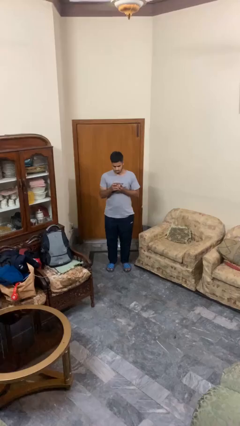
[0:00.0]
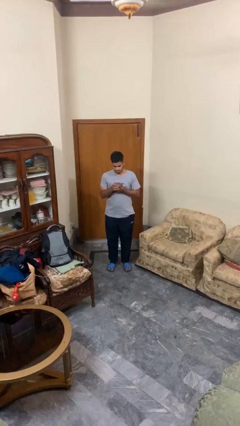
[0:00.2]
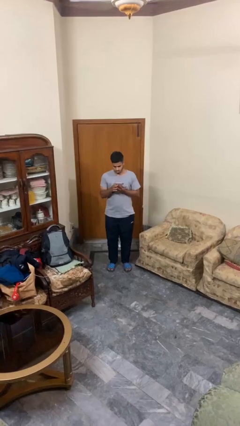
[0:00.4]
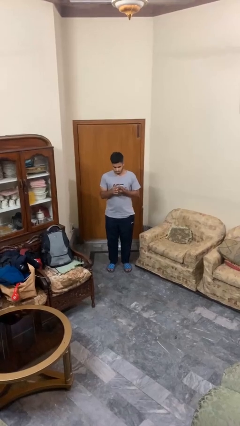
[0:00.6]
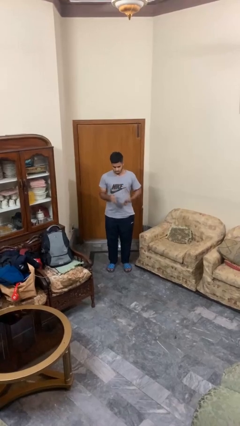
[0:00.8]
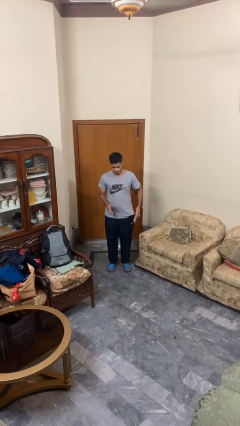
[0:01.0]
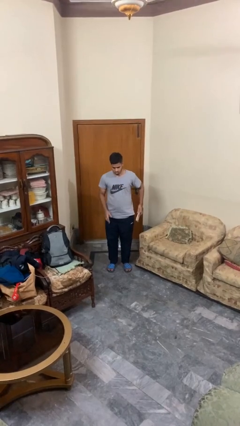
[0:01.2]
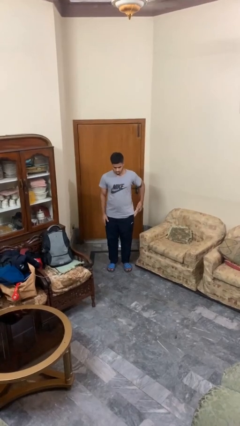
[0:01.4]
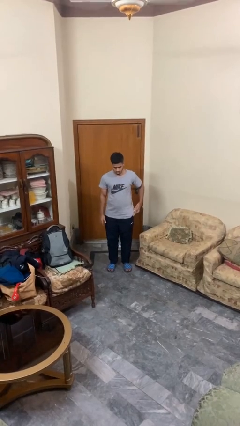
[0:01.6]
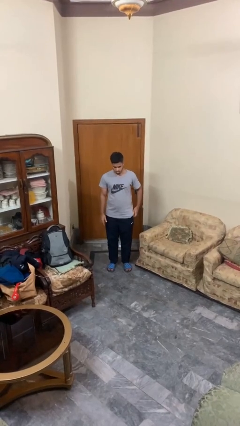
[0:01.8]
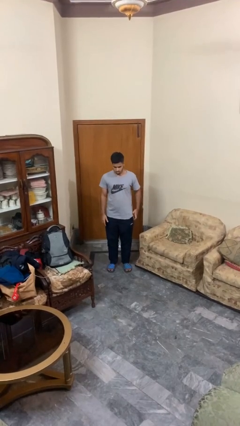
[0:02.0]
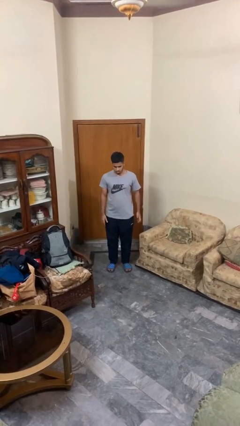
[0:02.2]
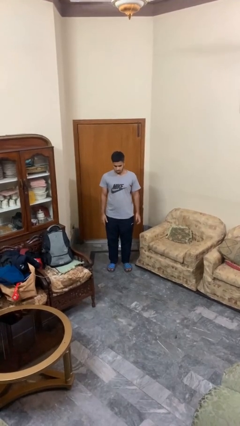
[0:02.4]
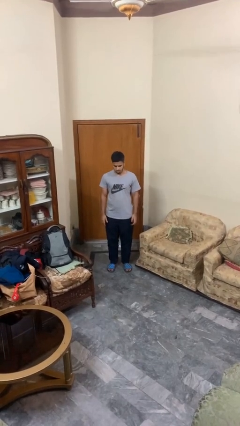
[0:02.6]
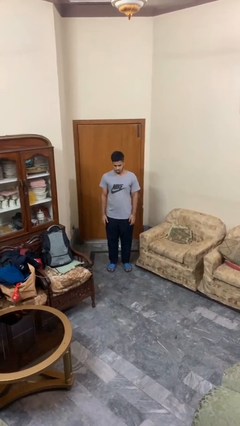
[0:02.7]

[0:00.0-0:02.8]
person puts phone into pocket

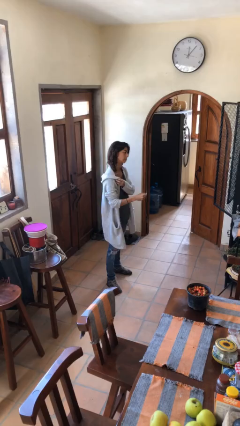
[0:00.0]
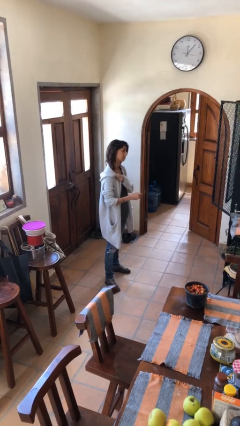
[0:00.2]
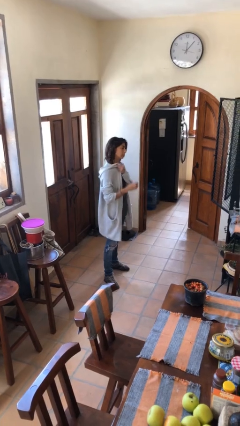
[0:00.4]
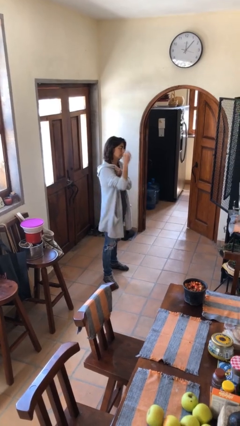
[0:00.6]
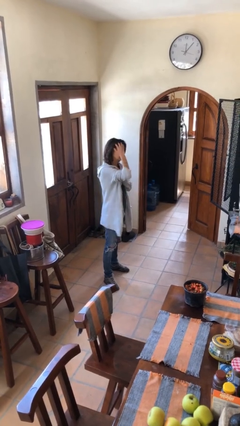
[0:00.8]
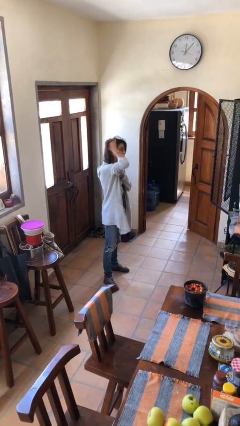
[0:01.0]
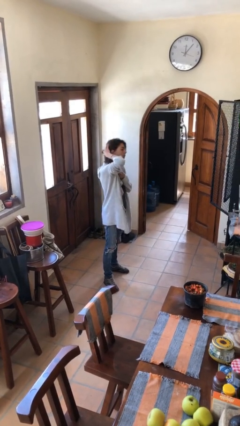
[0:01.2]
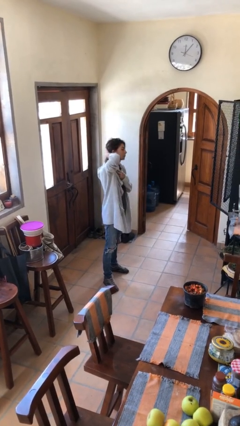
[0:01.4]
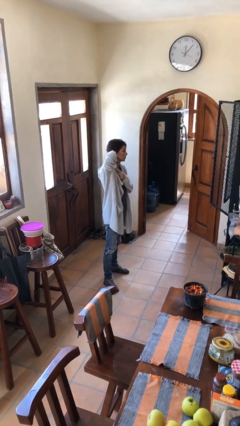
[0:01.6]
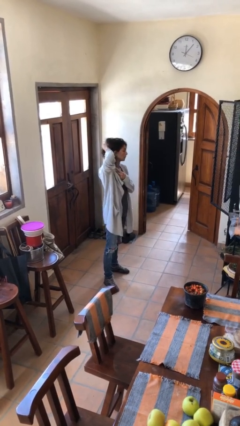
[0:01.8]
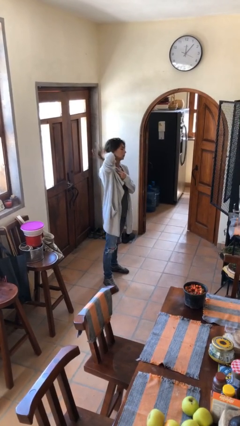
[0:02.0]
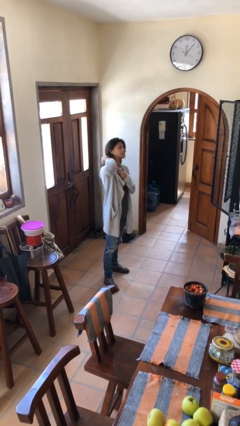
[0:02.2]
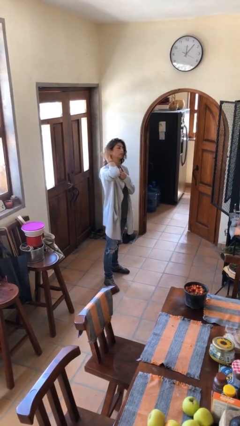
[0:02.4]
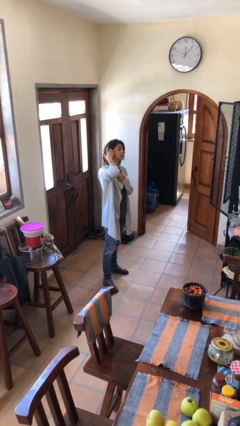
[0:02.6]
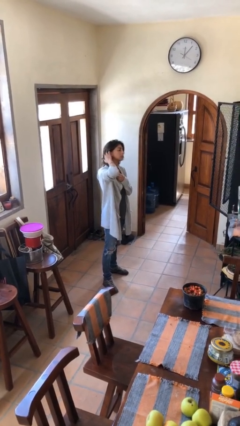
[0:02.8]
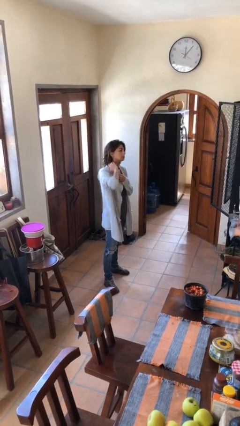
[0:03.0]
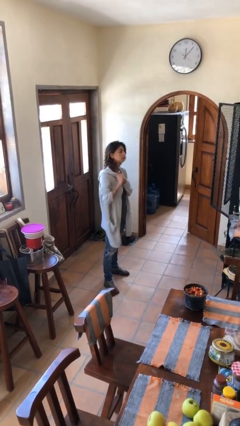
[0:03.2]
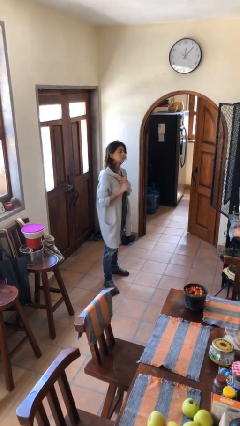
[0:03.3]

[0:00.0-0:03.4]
person strokes hair

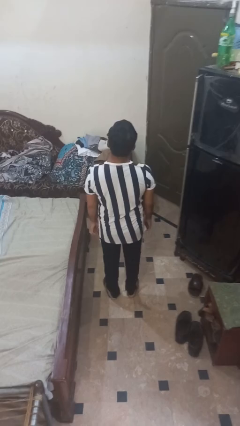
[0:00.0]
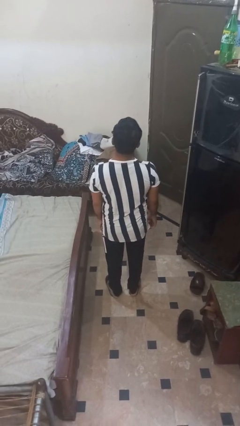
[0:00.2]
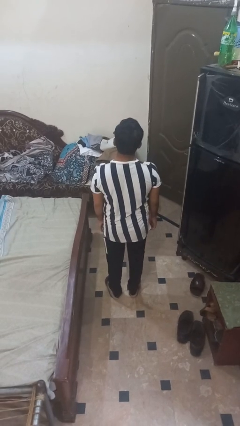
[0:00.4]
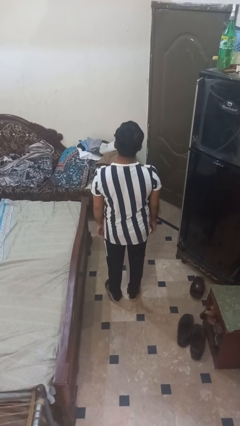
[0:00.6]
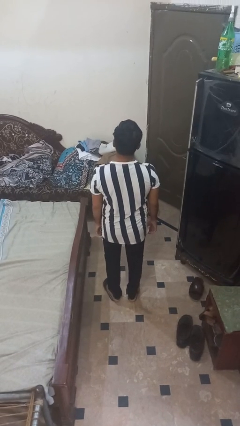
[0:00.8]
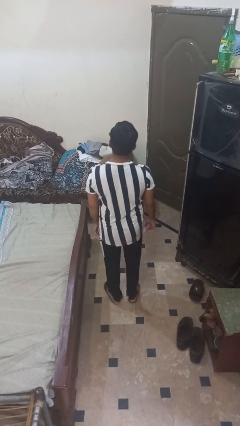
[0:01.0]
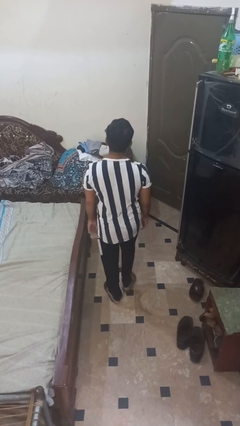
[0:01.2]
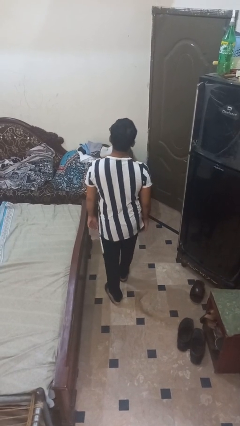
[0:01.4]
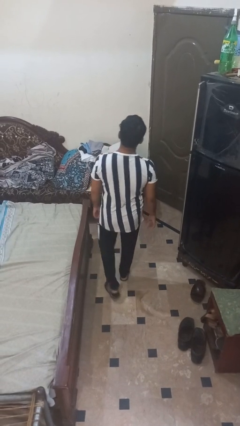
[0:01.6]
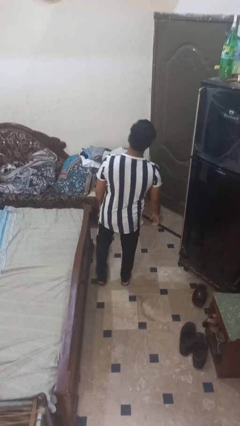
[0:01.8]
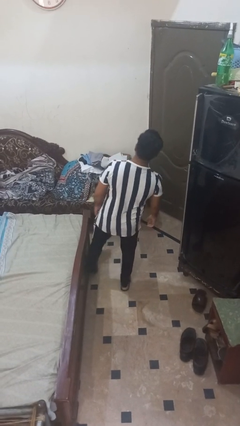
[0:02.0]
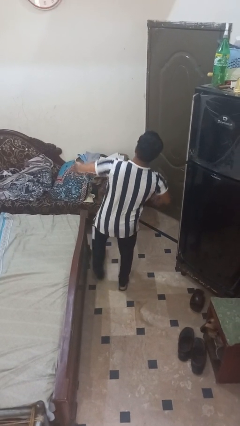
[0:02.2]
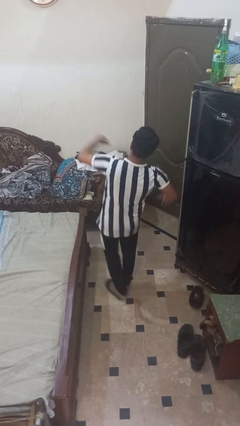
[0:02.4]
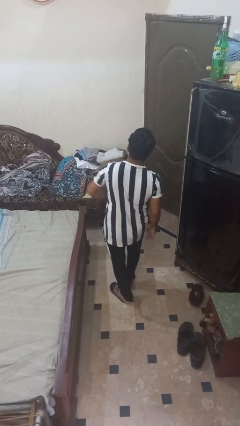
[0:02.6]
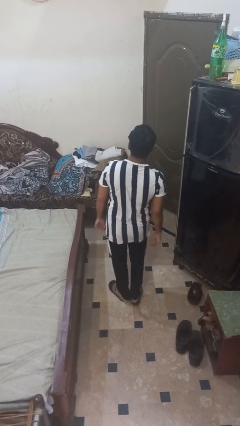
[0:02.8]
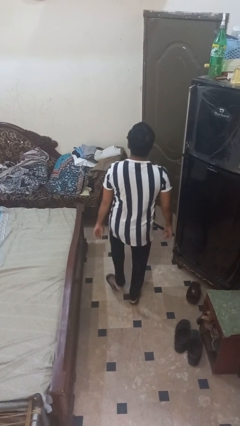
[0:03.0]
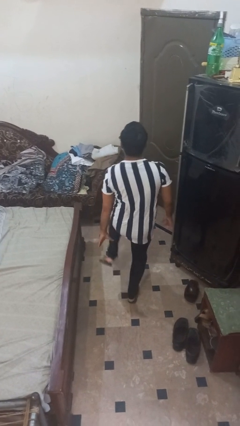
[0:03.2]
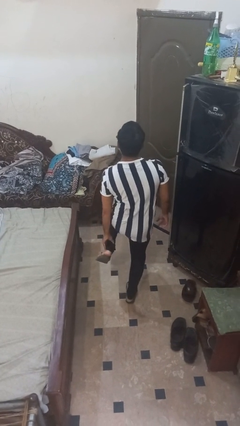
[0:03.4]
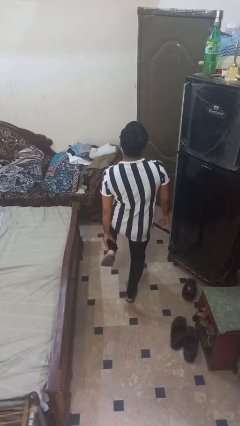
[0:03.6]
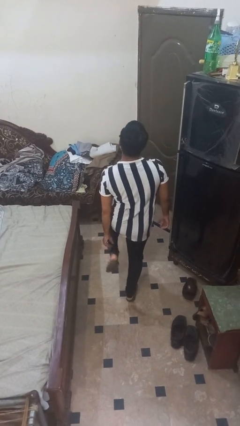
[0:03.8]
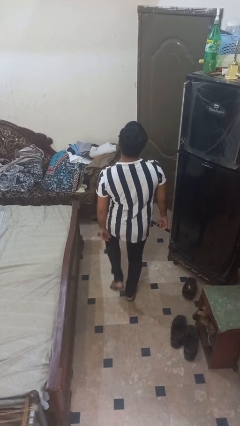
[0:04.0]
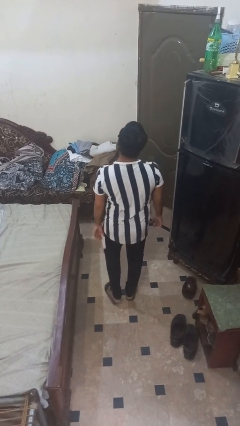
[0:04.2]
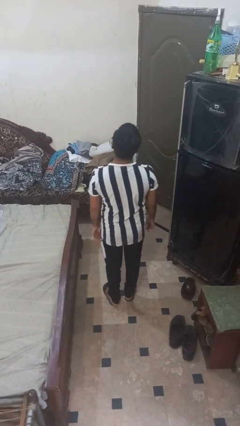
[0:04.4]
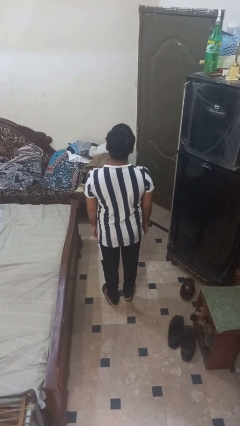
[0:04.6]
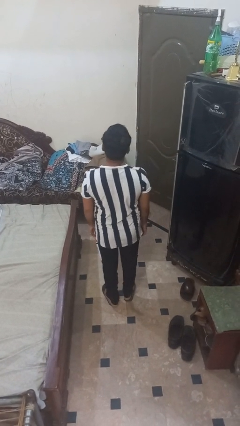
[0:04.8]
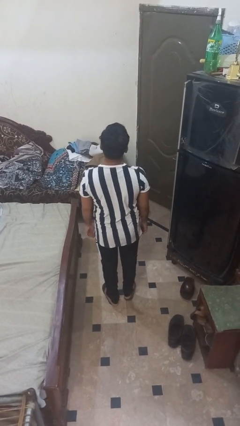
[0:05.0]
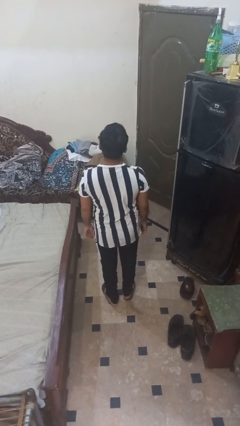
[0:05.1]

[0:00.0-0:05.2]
person stubs toe

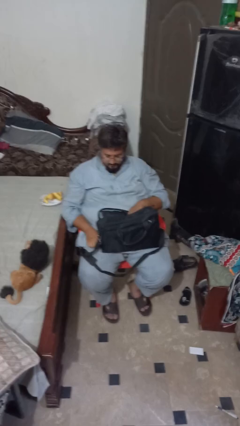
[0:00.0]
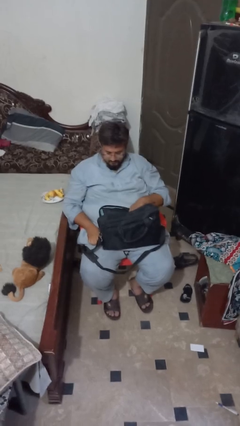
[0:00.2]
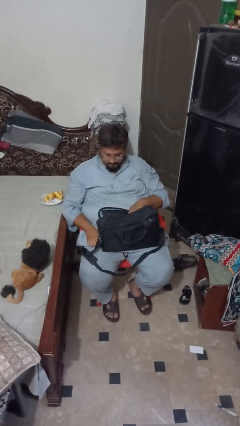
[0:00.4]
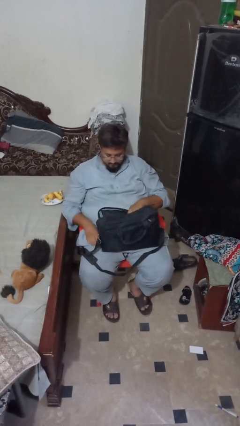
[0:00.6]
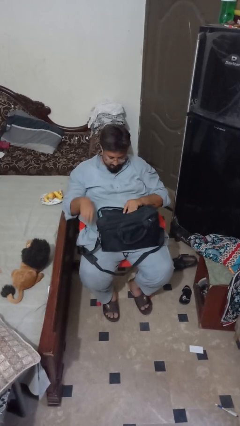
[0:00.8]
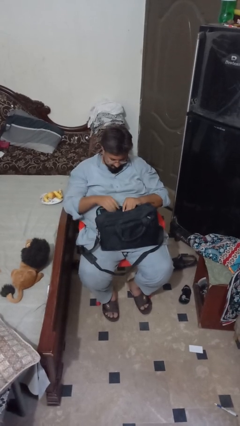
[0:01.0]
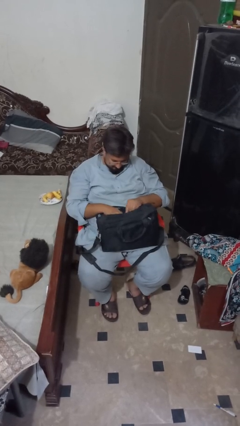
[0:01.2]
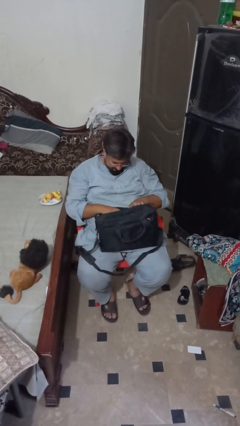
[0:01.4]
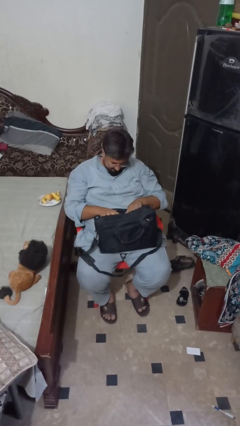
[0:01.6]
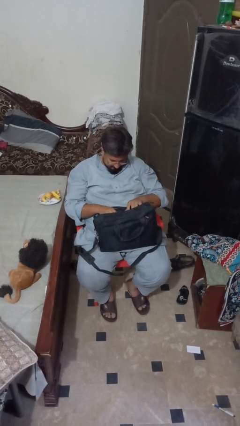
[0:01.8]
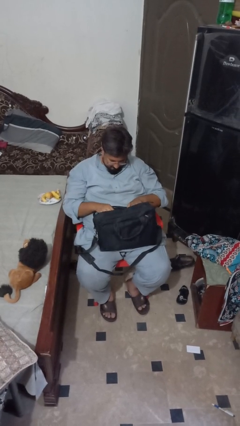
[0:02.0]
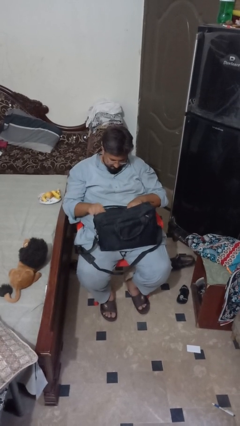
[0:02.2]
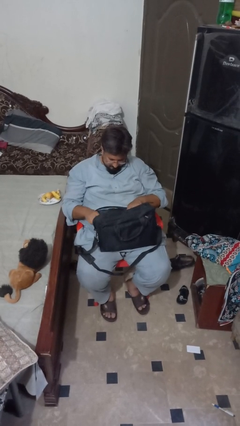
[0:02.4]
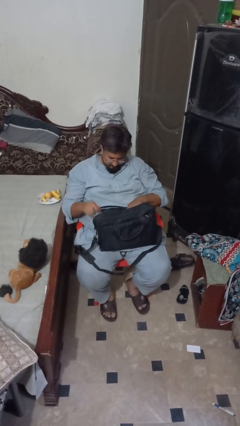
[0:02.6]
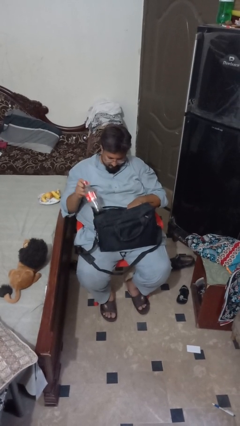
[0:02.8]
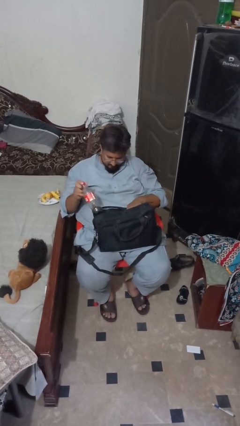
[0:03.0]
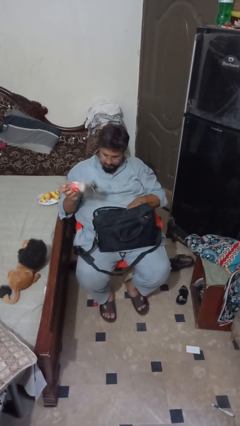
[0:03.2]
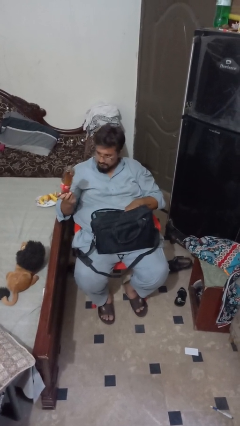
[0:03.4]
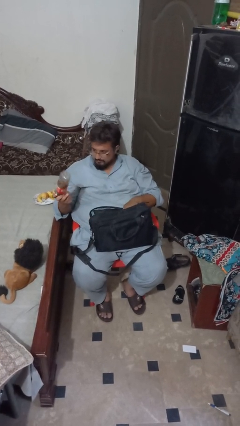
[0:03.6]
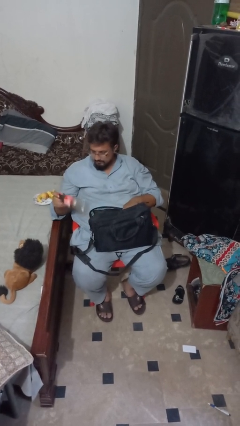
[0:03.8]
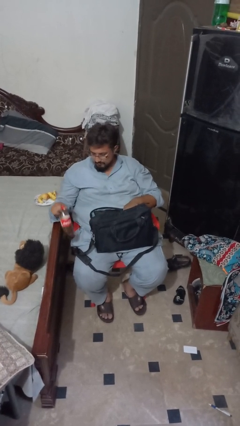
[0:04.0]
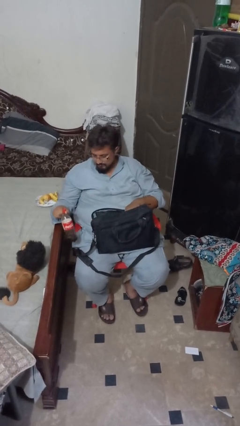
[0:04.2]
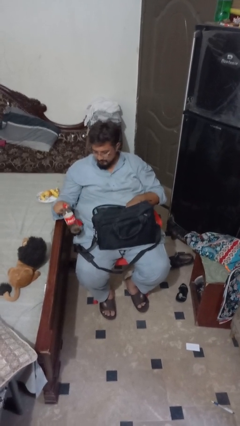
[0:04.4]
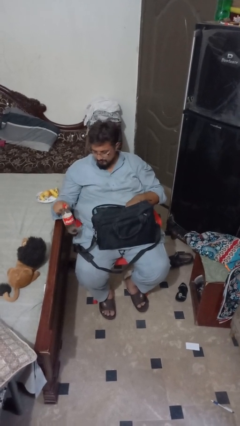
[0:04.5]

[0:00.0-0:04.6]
person takes object from bag

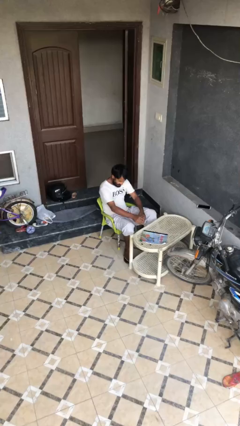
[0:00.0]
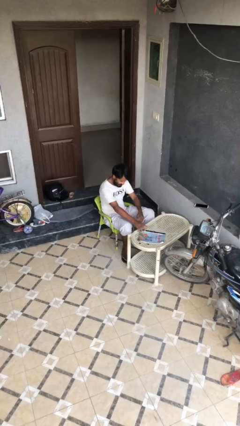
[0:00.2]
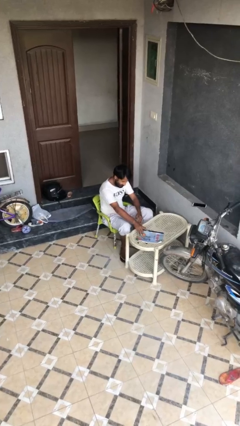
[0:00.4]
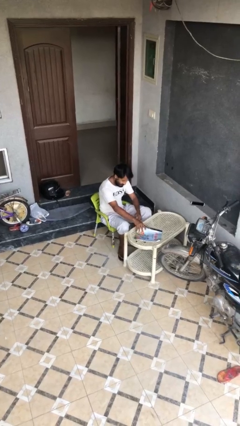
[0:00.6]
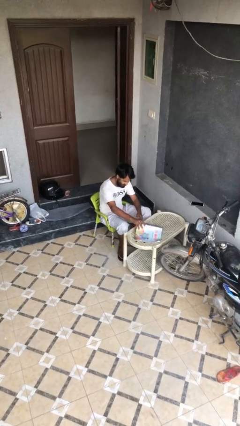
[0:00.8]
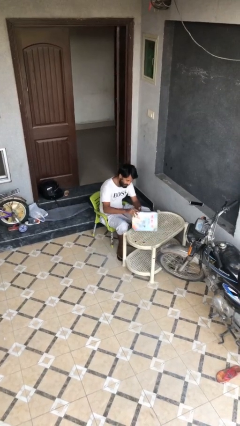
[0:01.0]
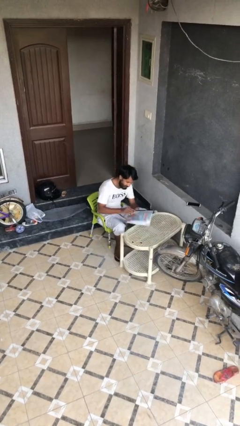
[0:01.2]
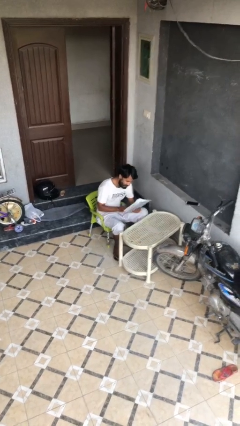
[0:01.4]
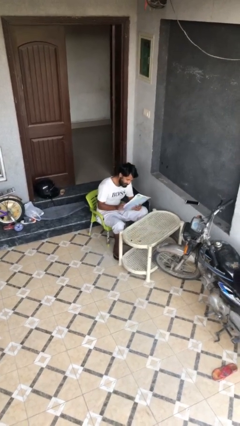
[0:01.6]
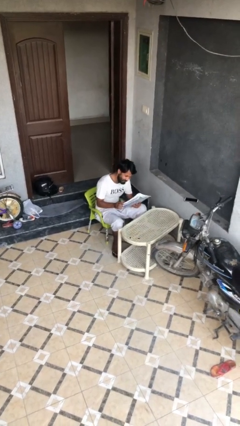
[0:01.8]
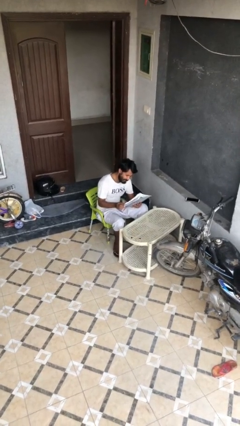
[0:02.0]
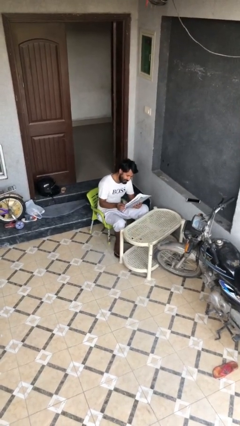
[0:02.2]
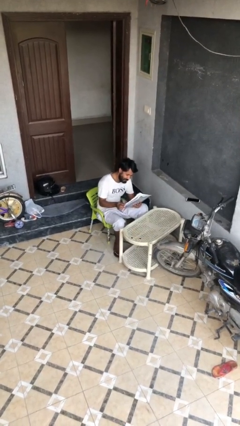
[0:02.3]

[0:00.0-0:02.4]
person picks up object from table
